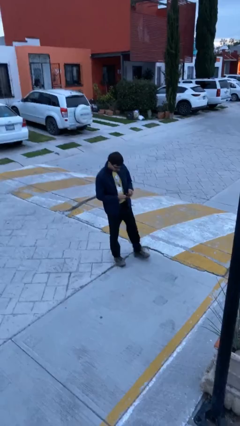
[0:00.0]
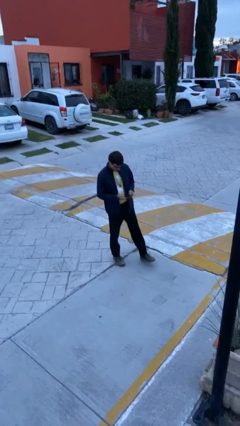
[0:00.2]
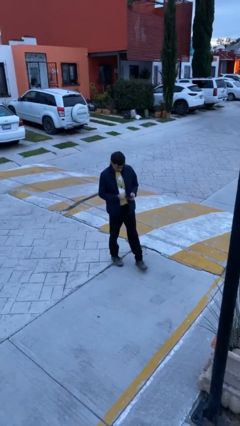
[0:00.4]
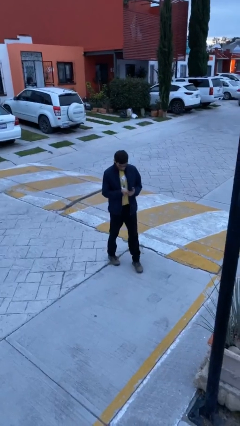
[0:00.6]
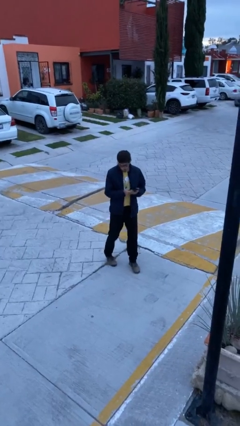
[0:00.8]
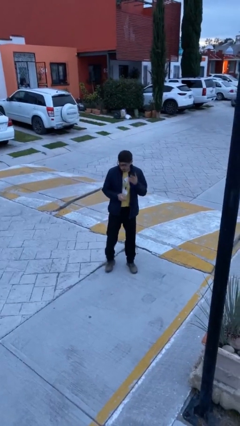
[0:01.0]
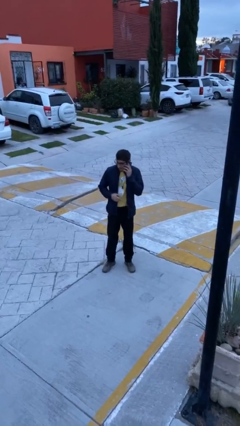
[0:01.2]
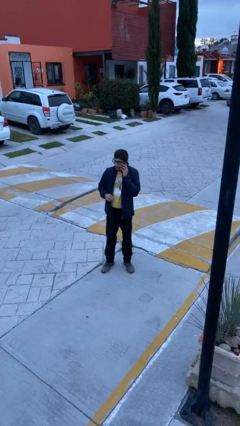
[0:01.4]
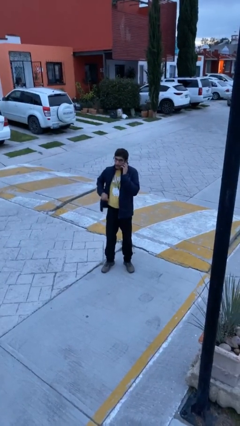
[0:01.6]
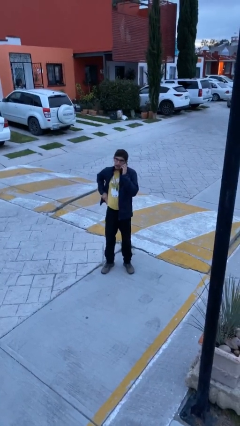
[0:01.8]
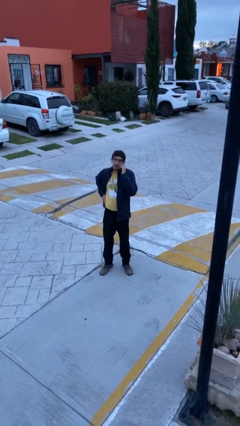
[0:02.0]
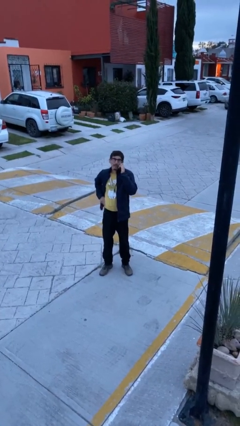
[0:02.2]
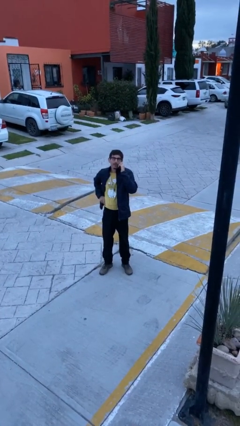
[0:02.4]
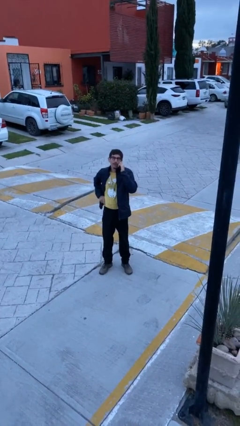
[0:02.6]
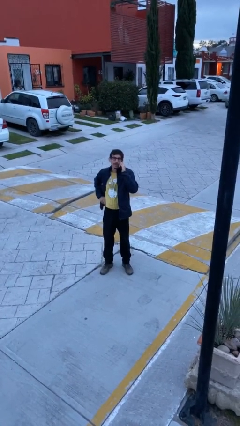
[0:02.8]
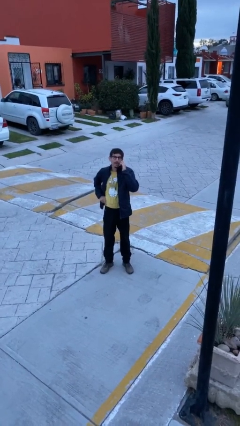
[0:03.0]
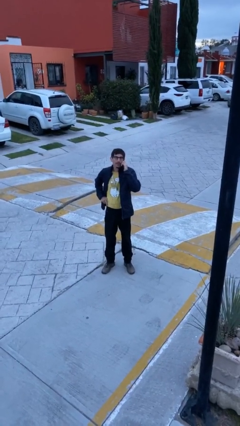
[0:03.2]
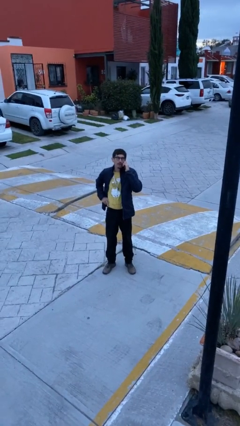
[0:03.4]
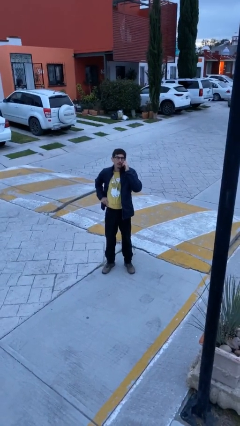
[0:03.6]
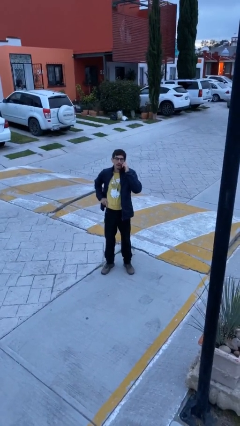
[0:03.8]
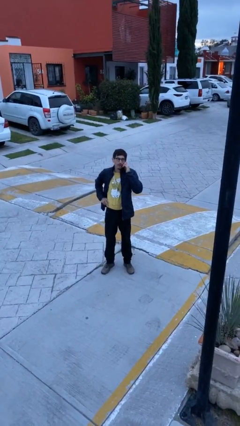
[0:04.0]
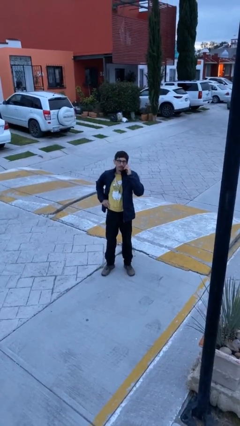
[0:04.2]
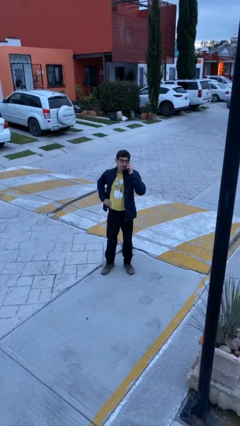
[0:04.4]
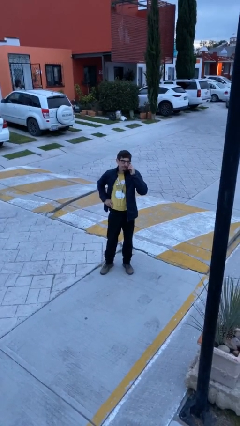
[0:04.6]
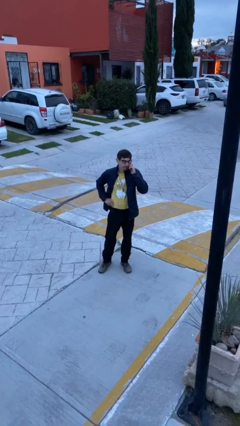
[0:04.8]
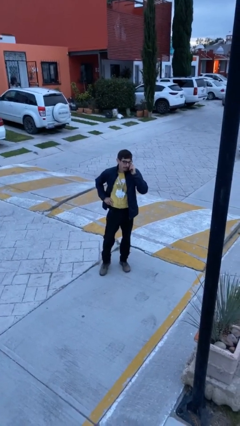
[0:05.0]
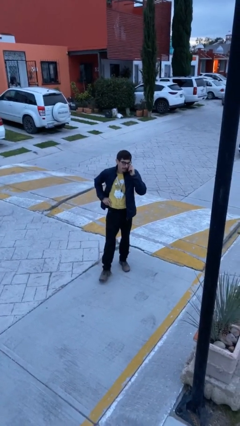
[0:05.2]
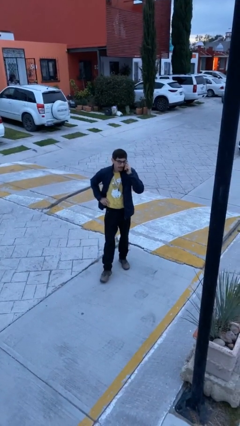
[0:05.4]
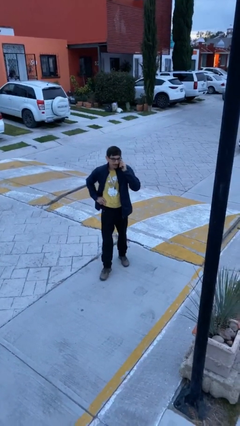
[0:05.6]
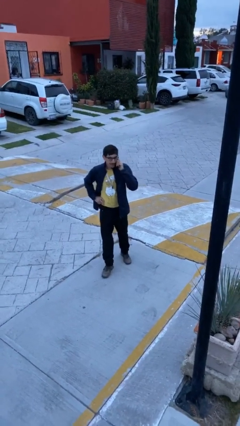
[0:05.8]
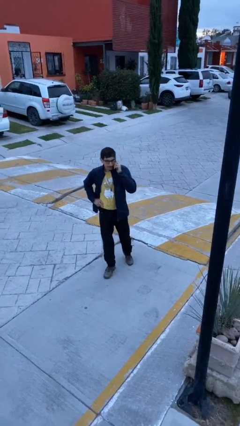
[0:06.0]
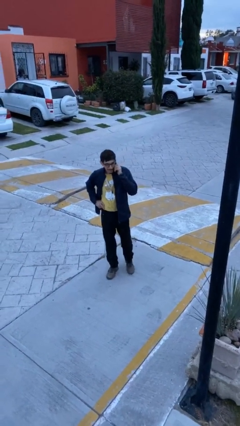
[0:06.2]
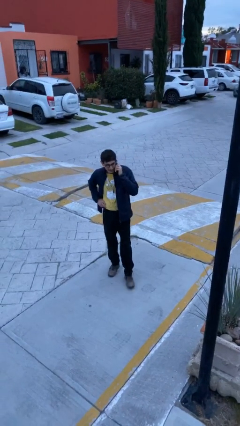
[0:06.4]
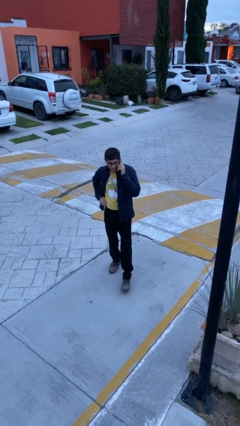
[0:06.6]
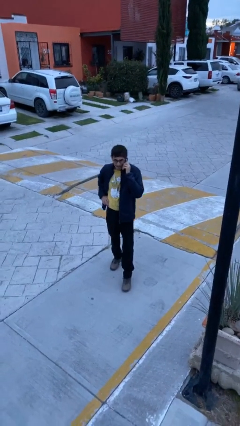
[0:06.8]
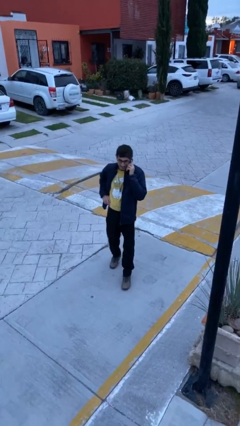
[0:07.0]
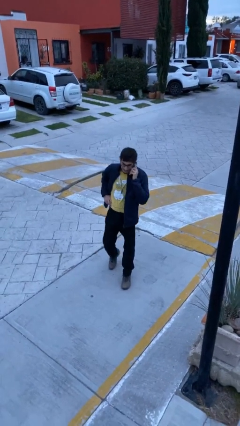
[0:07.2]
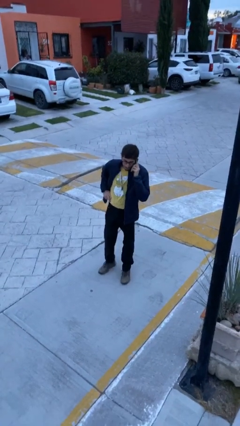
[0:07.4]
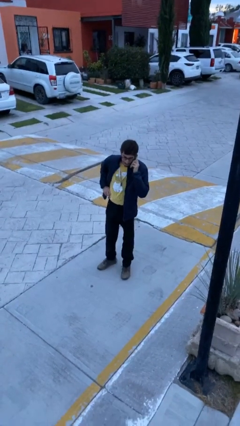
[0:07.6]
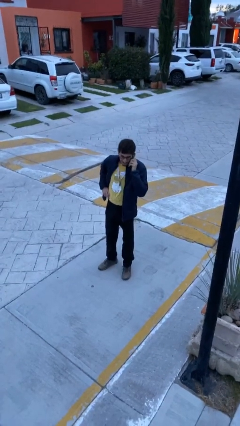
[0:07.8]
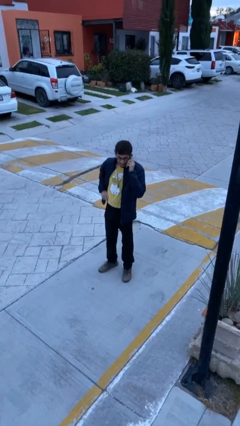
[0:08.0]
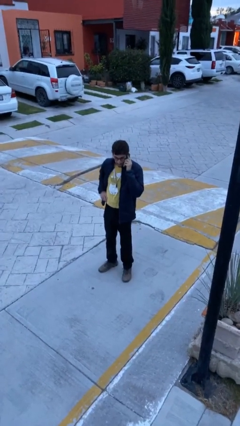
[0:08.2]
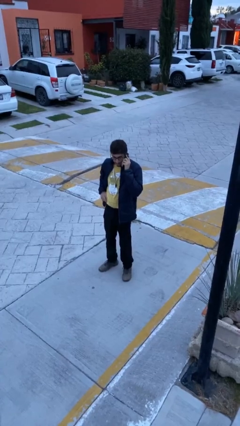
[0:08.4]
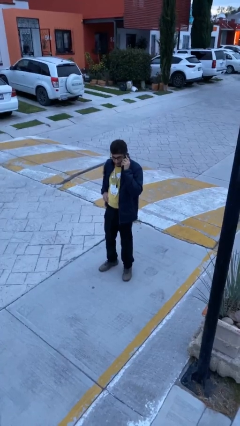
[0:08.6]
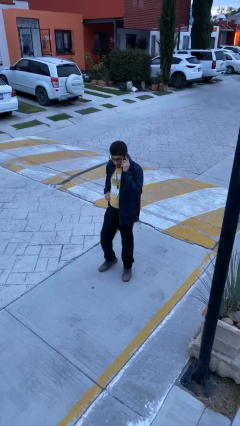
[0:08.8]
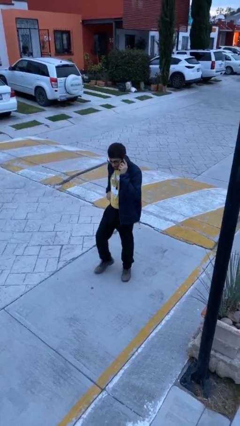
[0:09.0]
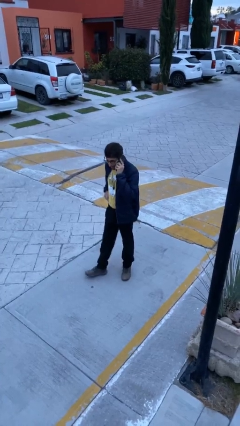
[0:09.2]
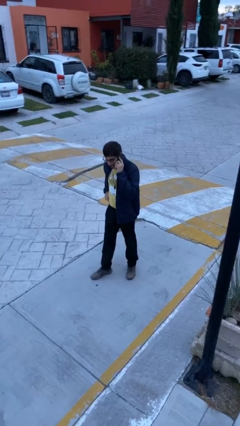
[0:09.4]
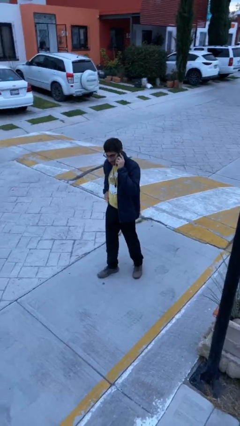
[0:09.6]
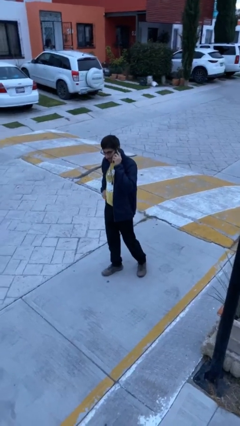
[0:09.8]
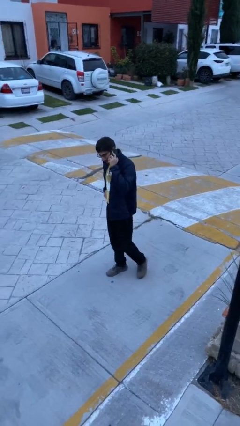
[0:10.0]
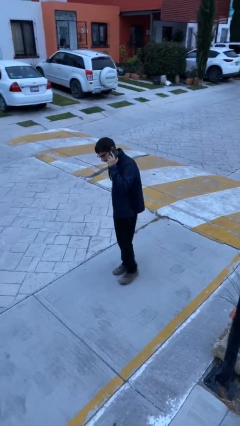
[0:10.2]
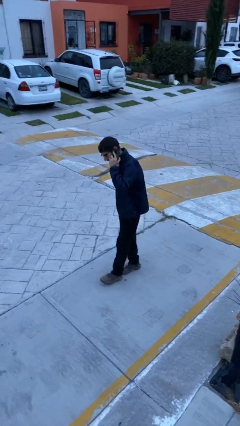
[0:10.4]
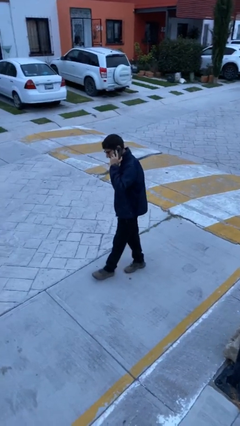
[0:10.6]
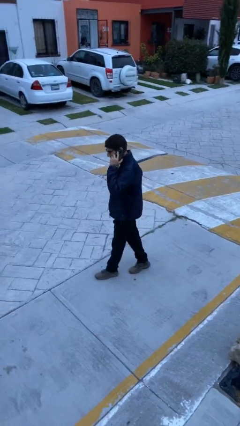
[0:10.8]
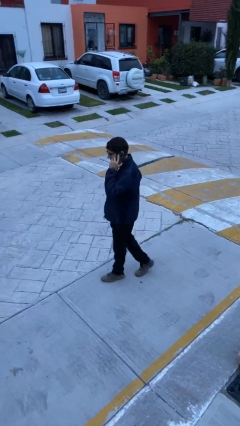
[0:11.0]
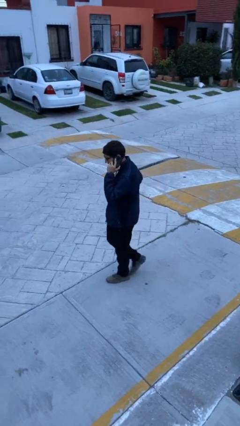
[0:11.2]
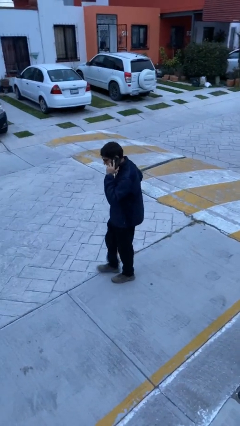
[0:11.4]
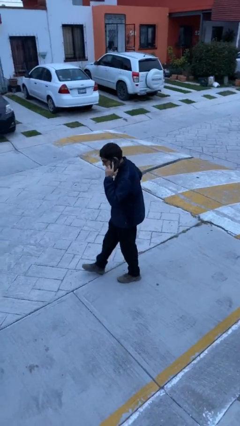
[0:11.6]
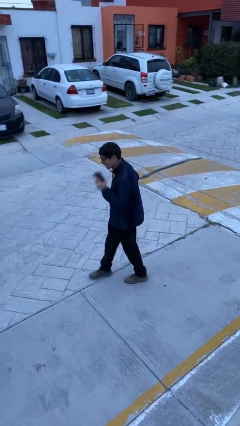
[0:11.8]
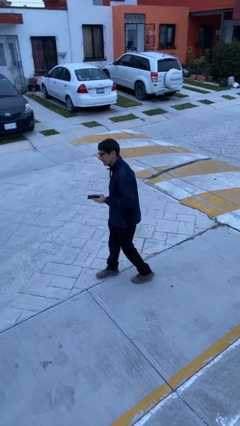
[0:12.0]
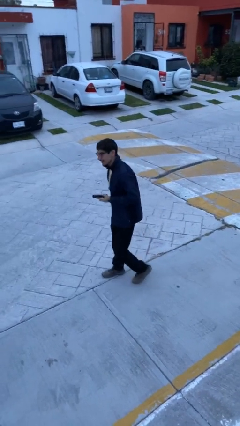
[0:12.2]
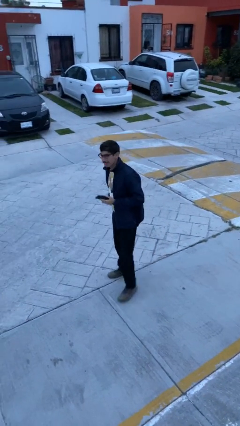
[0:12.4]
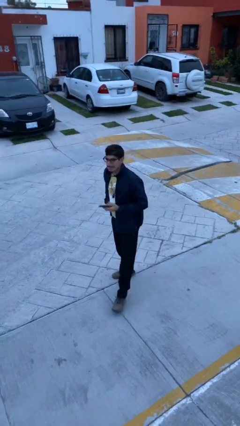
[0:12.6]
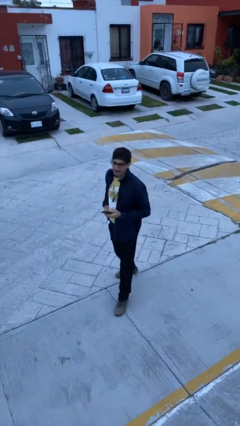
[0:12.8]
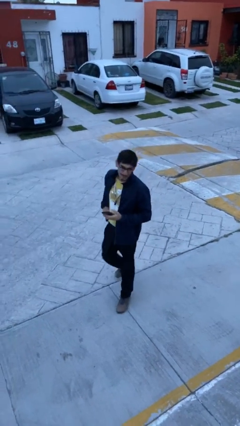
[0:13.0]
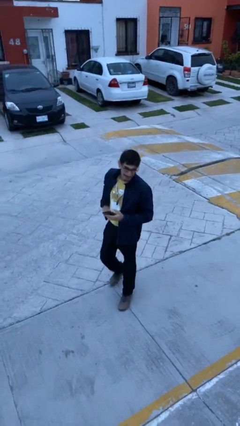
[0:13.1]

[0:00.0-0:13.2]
person talks on phone

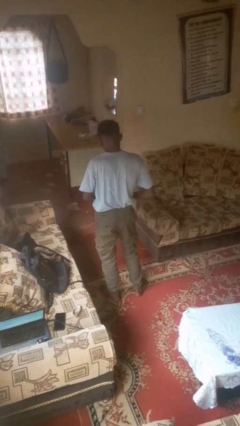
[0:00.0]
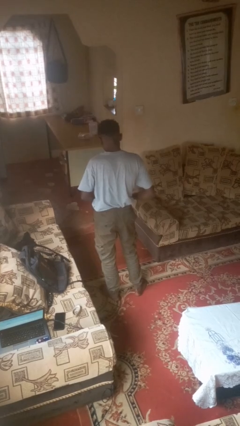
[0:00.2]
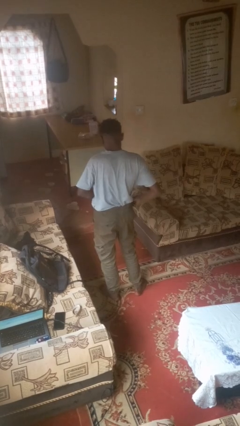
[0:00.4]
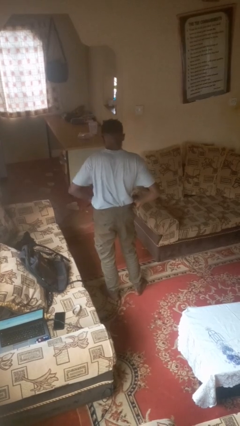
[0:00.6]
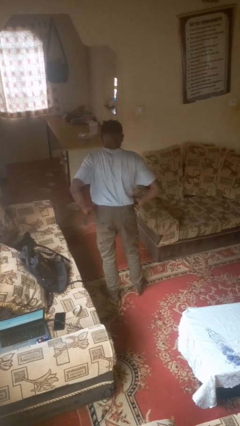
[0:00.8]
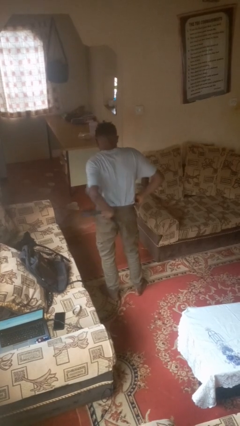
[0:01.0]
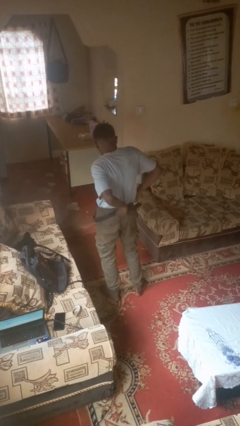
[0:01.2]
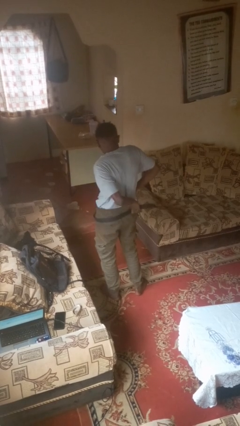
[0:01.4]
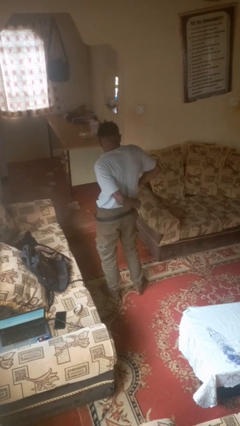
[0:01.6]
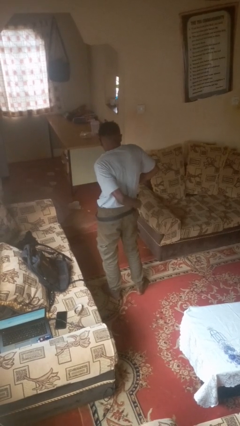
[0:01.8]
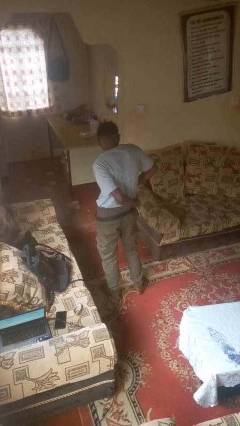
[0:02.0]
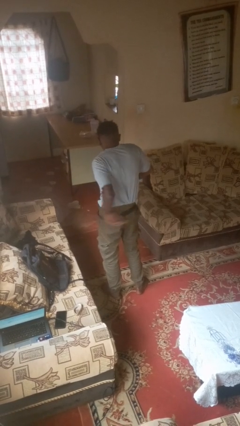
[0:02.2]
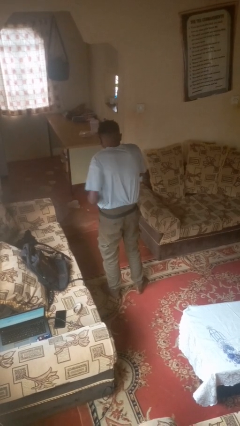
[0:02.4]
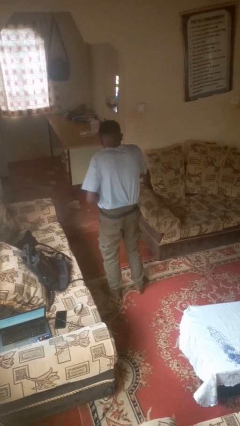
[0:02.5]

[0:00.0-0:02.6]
person puts on belt

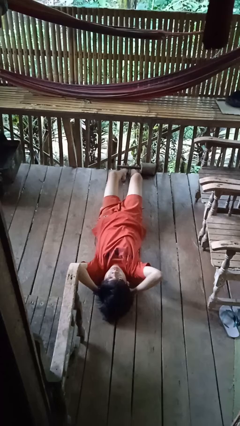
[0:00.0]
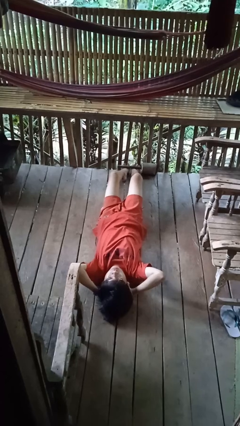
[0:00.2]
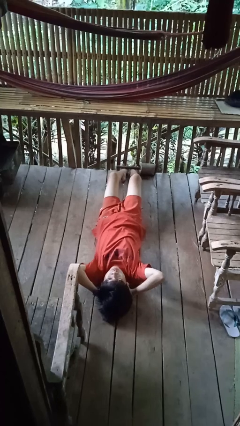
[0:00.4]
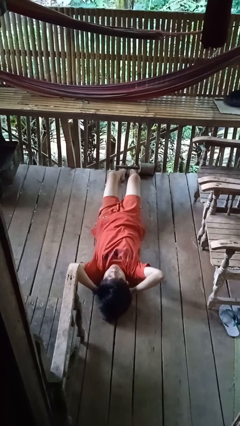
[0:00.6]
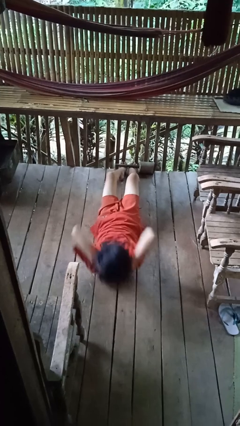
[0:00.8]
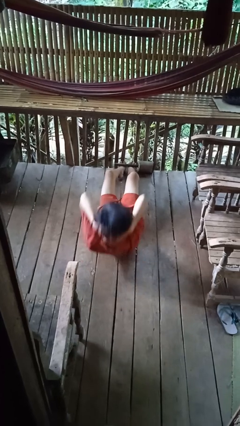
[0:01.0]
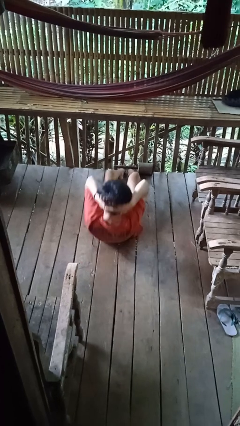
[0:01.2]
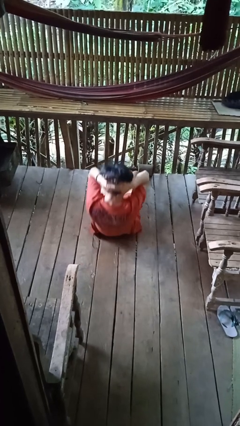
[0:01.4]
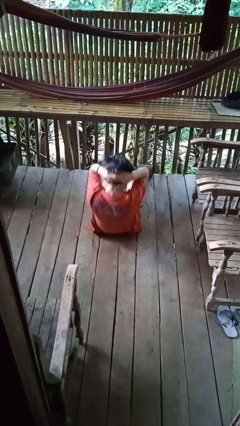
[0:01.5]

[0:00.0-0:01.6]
person exercises with situp

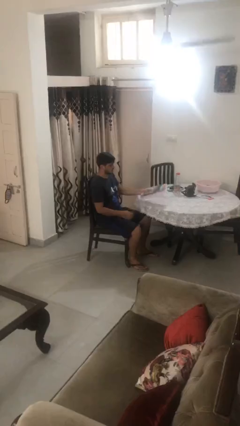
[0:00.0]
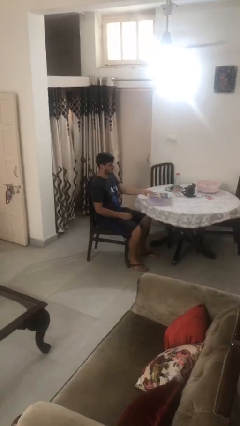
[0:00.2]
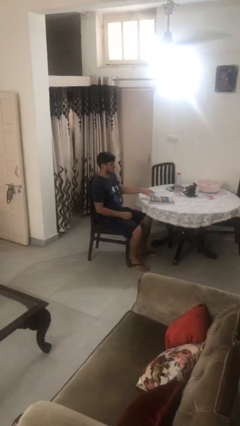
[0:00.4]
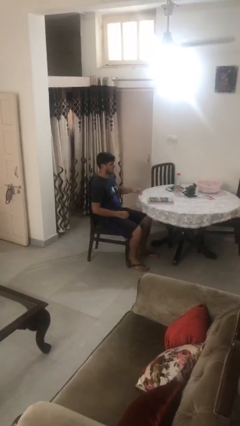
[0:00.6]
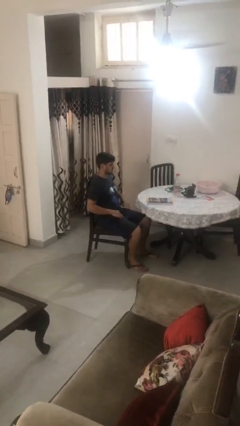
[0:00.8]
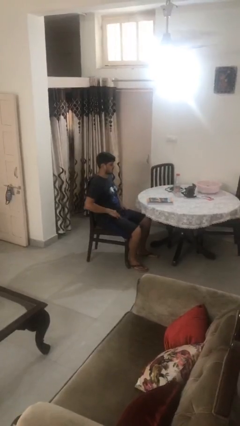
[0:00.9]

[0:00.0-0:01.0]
person puts down object on table
